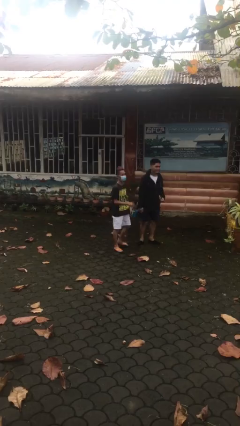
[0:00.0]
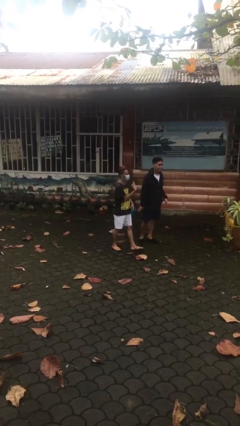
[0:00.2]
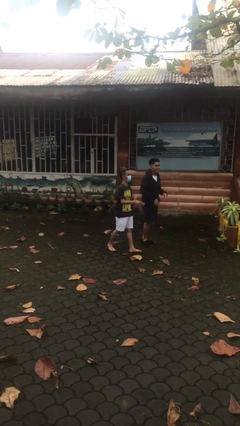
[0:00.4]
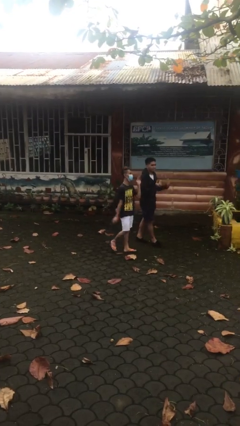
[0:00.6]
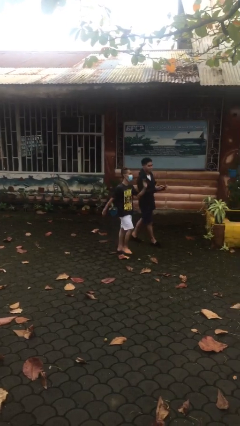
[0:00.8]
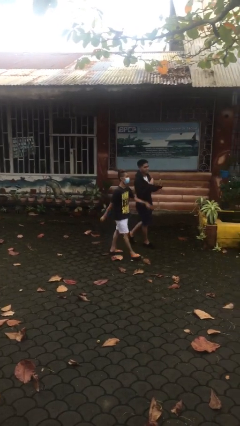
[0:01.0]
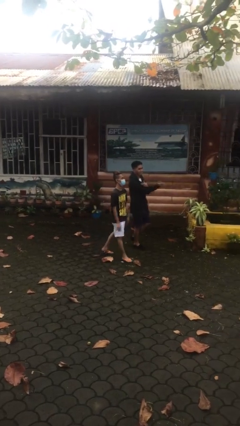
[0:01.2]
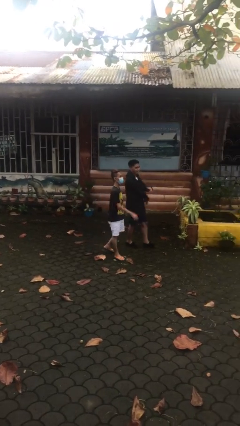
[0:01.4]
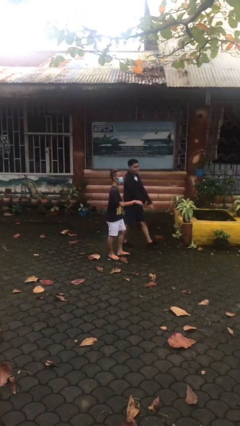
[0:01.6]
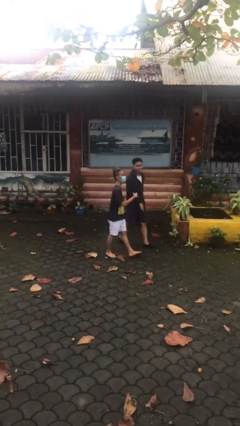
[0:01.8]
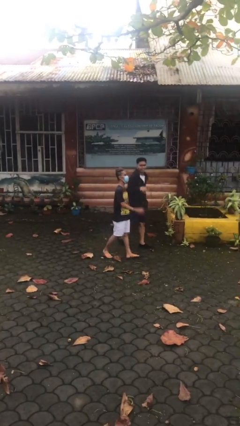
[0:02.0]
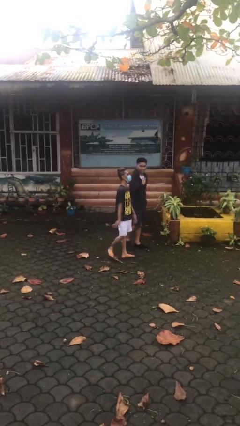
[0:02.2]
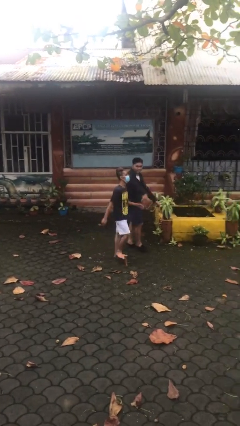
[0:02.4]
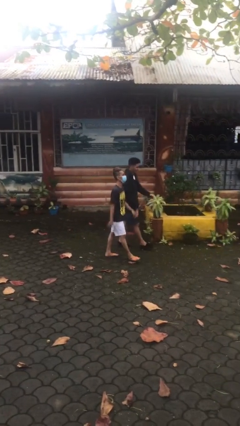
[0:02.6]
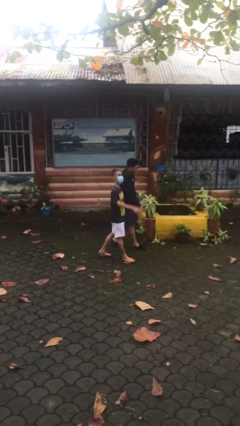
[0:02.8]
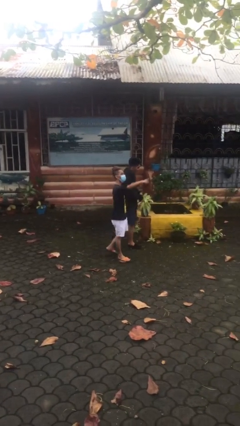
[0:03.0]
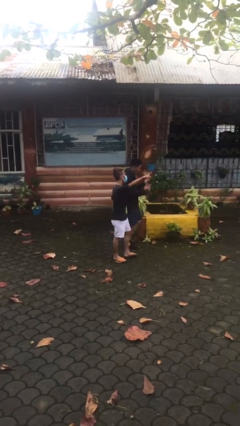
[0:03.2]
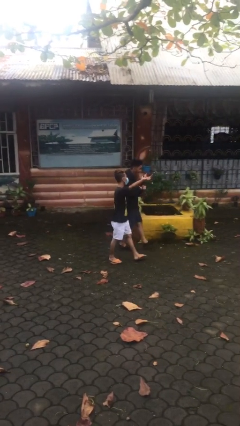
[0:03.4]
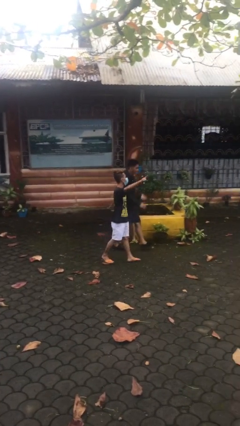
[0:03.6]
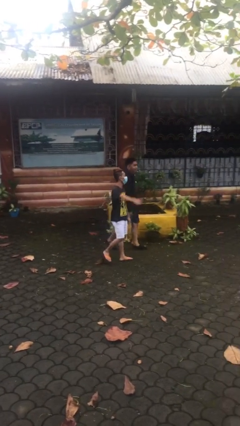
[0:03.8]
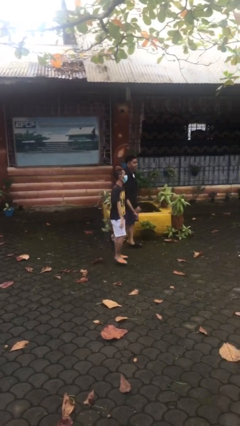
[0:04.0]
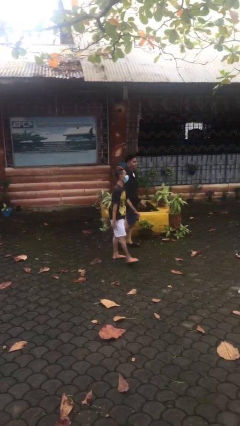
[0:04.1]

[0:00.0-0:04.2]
person talks to person

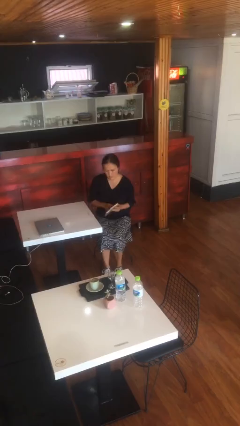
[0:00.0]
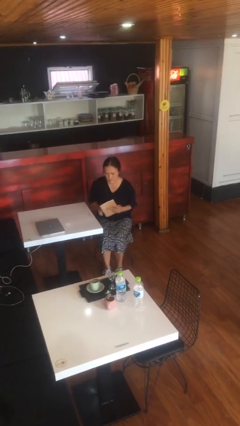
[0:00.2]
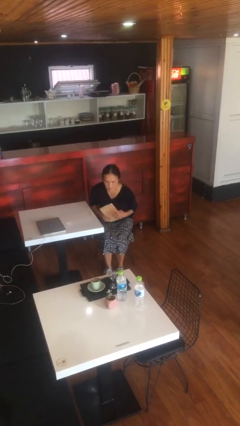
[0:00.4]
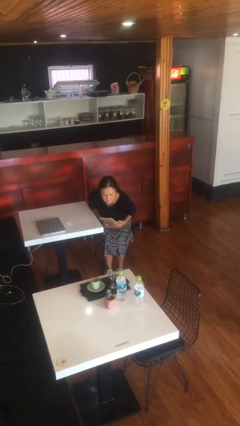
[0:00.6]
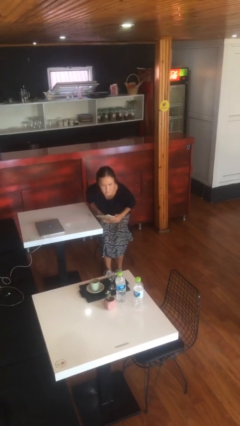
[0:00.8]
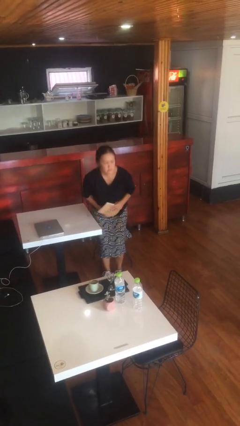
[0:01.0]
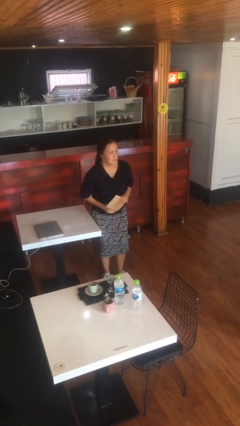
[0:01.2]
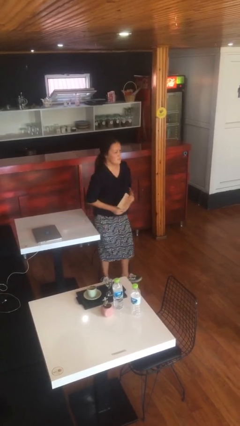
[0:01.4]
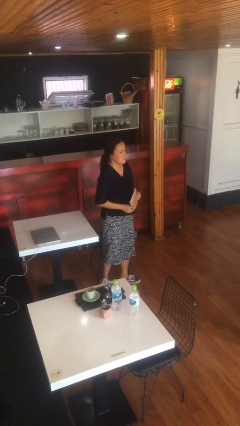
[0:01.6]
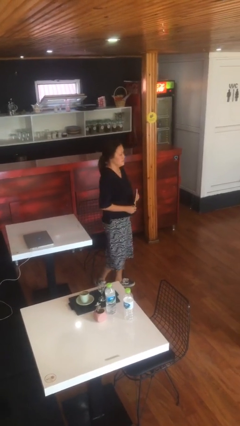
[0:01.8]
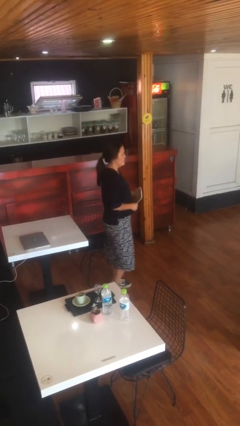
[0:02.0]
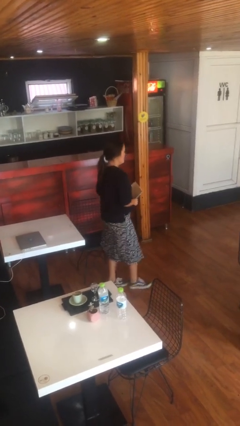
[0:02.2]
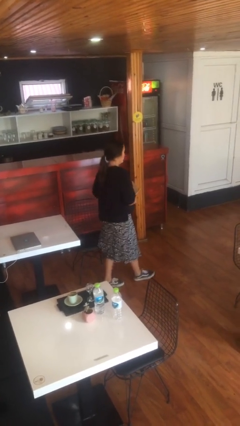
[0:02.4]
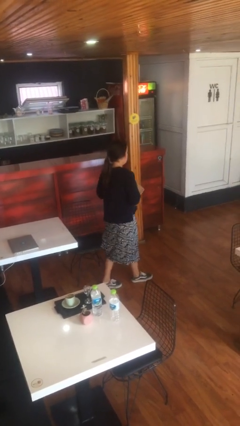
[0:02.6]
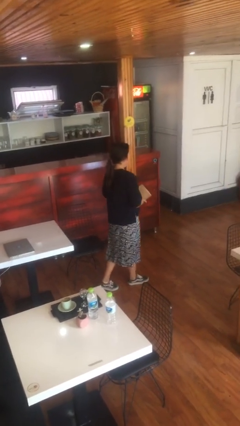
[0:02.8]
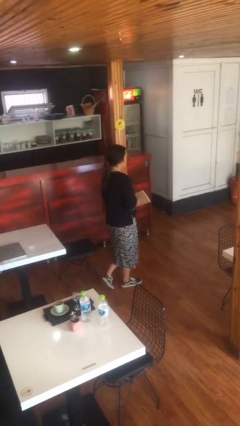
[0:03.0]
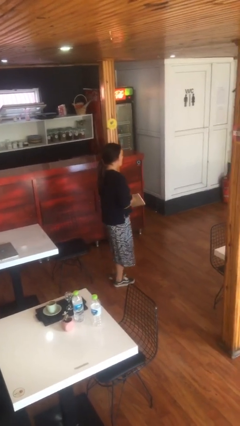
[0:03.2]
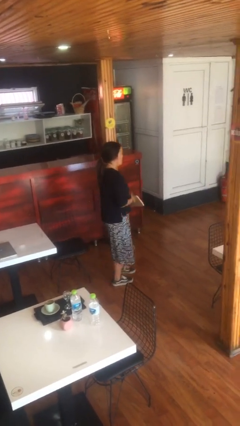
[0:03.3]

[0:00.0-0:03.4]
person stands up

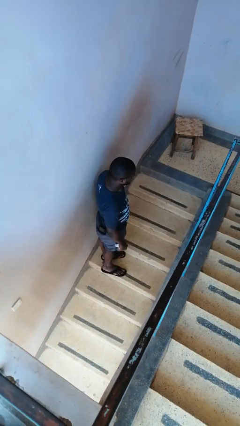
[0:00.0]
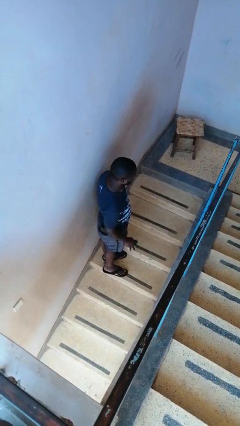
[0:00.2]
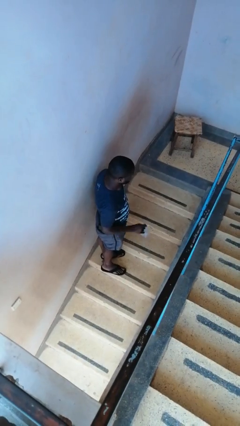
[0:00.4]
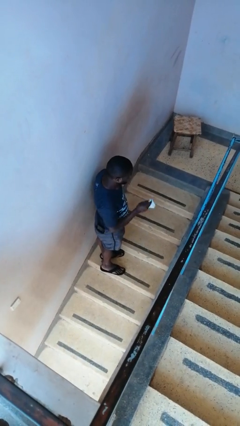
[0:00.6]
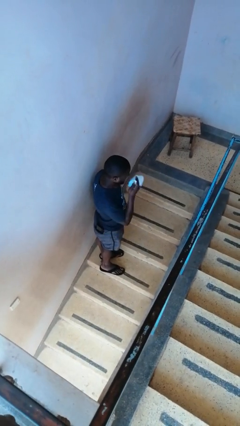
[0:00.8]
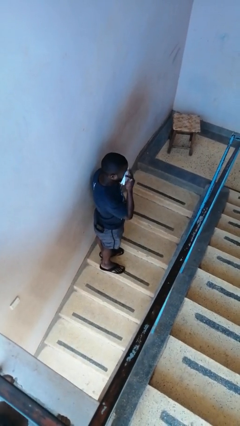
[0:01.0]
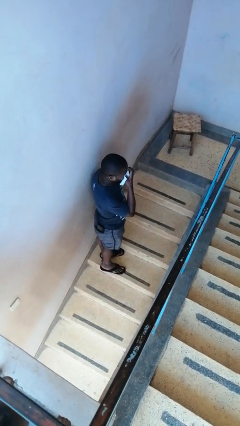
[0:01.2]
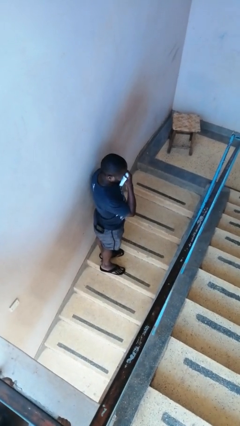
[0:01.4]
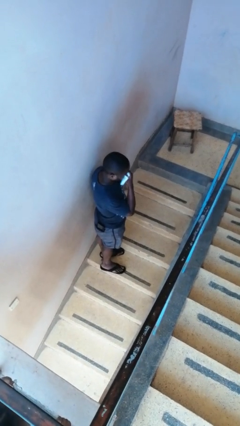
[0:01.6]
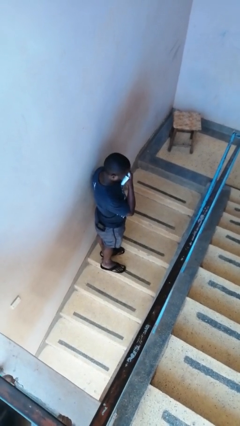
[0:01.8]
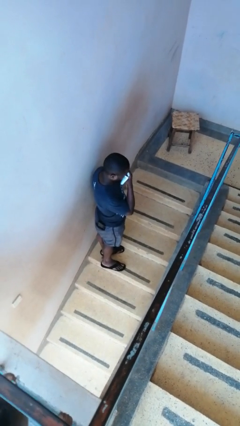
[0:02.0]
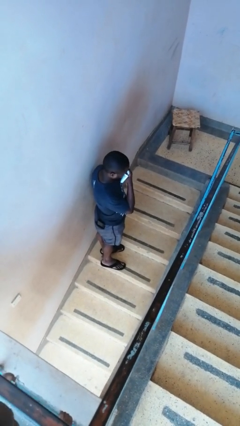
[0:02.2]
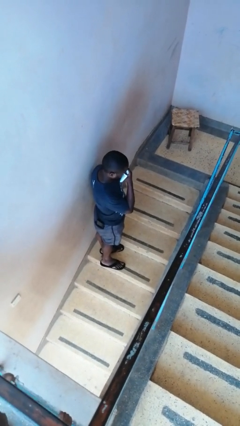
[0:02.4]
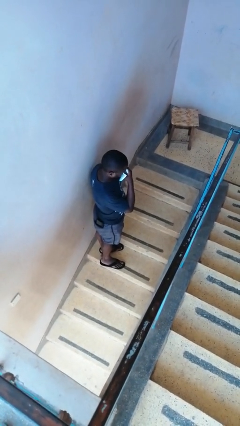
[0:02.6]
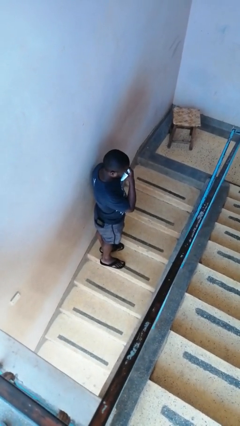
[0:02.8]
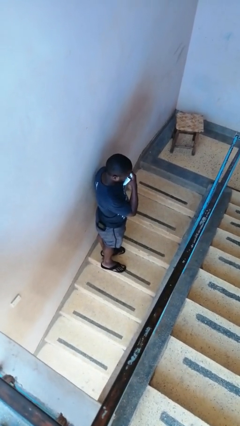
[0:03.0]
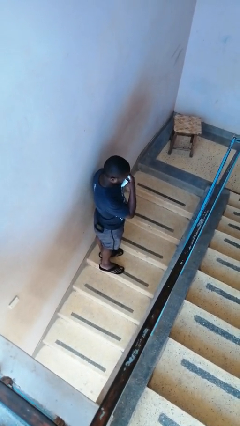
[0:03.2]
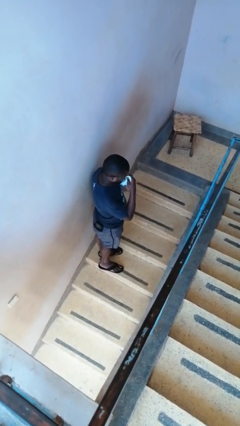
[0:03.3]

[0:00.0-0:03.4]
person blows nose

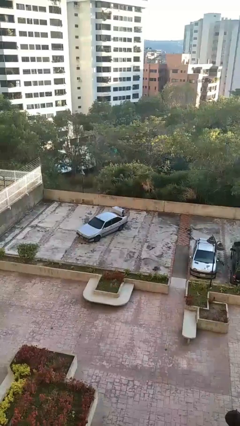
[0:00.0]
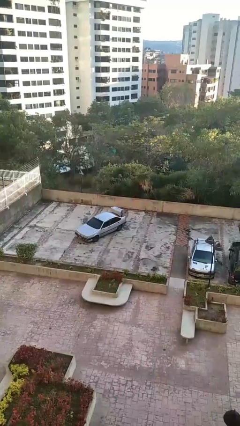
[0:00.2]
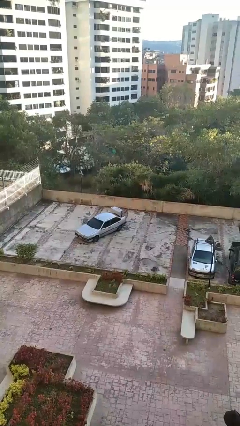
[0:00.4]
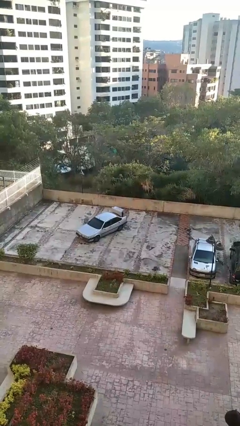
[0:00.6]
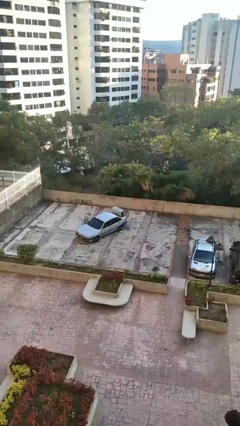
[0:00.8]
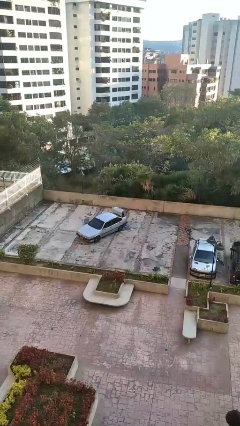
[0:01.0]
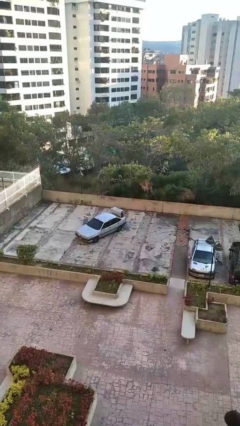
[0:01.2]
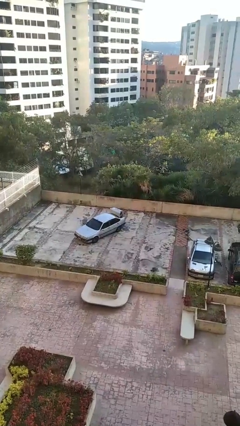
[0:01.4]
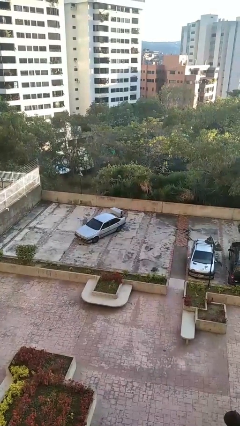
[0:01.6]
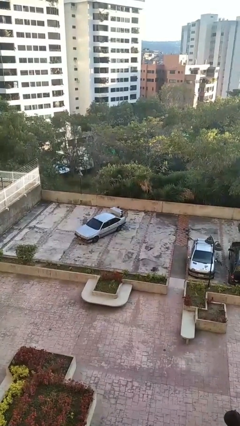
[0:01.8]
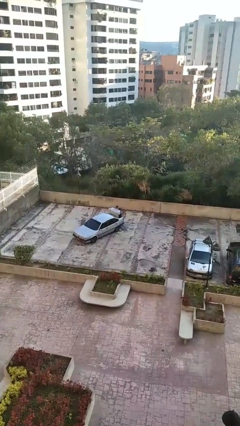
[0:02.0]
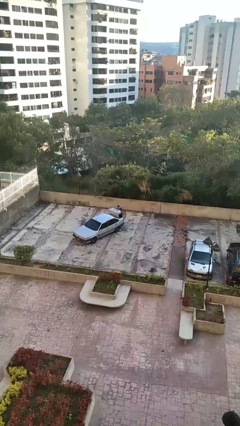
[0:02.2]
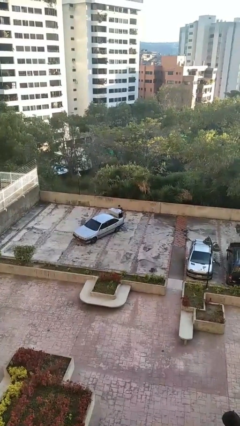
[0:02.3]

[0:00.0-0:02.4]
person unloads car

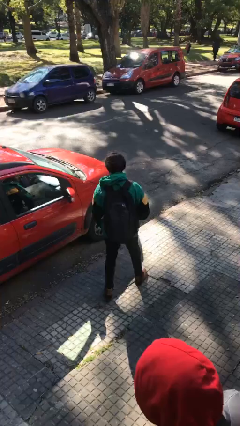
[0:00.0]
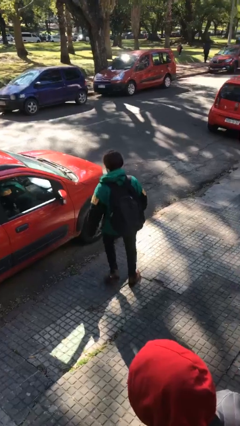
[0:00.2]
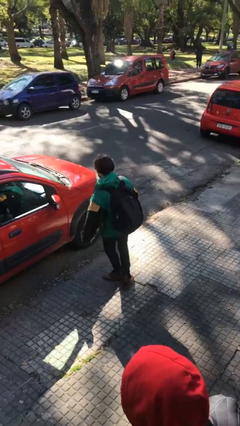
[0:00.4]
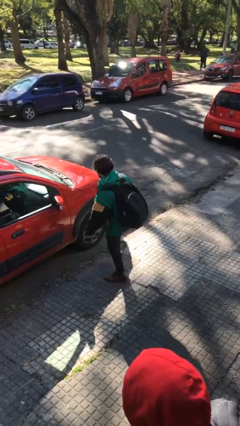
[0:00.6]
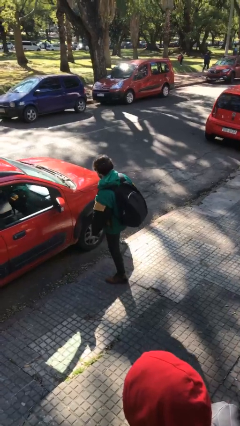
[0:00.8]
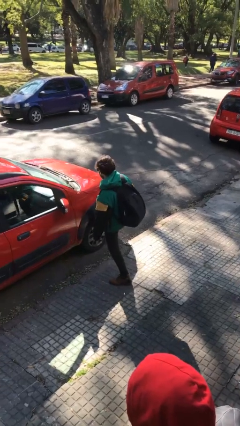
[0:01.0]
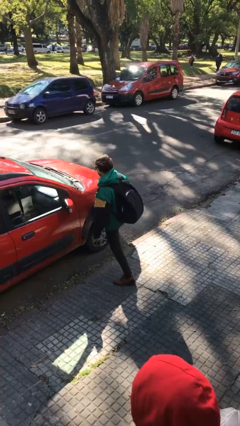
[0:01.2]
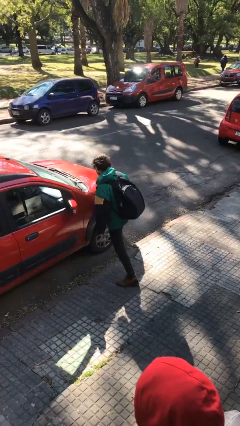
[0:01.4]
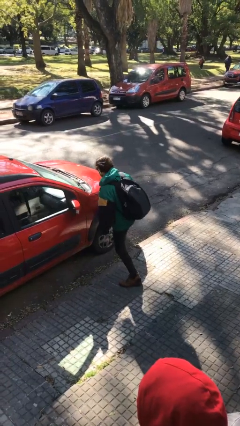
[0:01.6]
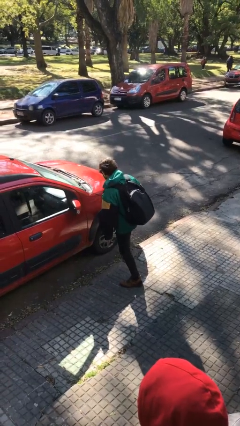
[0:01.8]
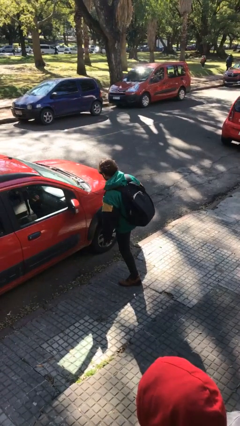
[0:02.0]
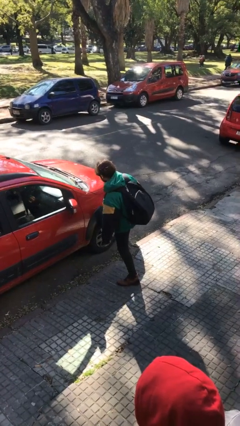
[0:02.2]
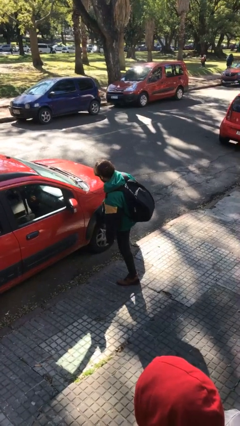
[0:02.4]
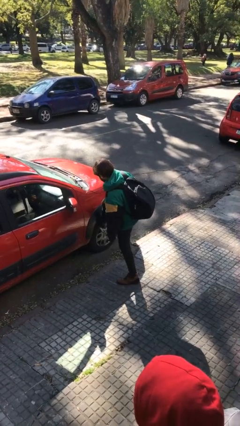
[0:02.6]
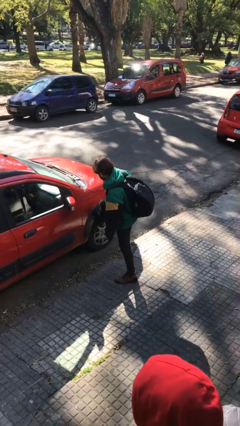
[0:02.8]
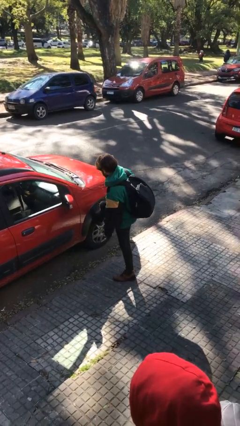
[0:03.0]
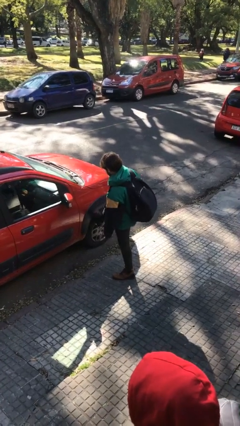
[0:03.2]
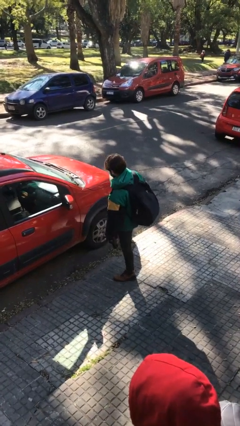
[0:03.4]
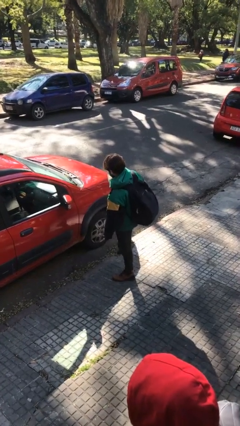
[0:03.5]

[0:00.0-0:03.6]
person kicks car tires
